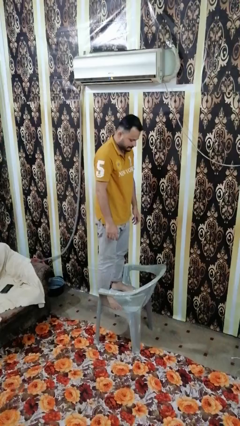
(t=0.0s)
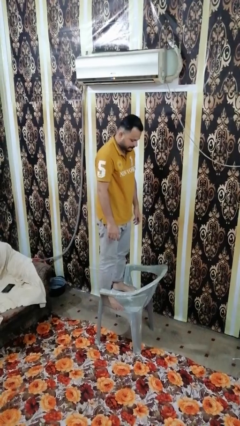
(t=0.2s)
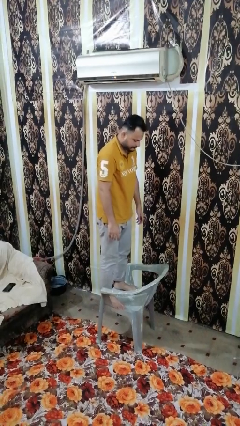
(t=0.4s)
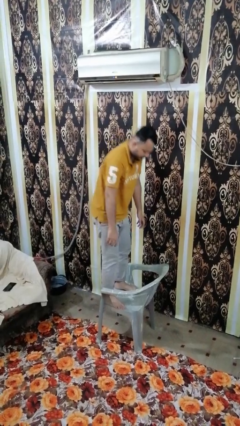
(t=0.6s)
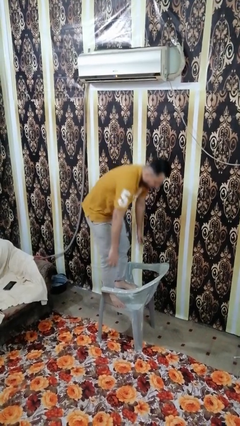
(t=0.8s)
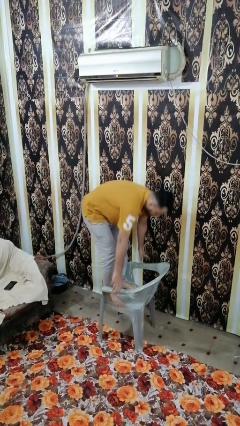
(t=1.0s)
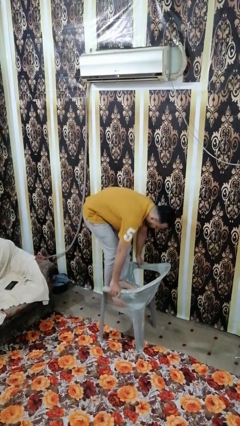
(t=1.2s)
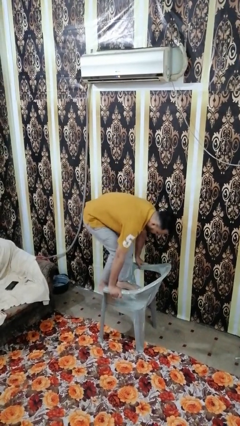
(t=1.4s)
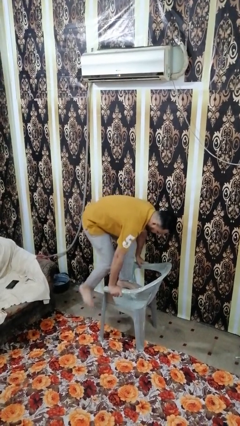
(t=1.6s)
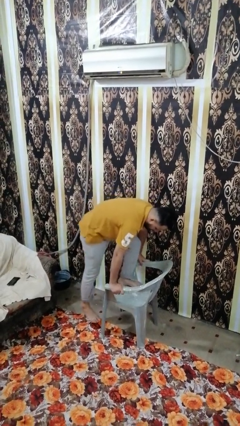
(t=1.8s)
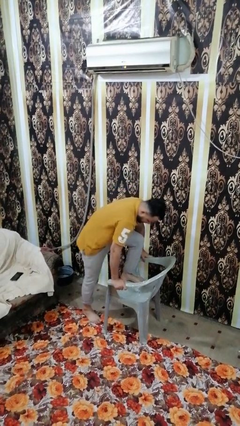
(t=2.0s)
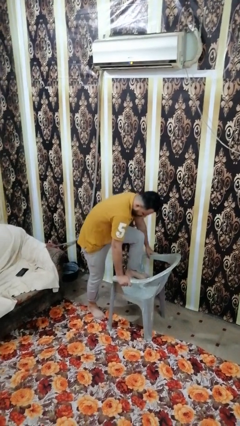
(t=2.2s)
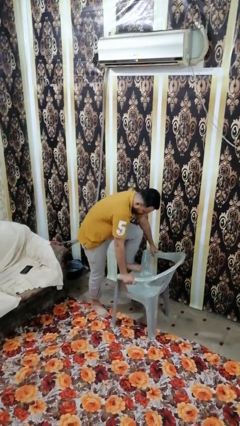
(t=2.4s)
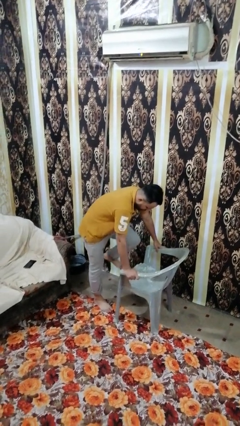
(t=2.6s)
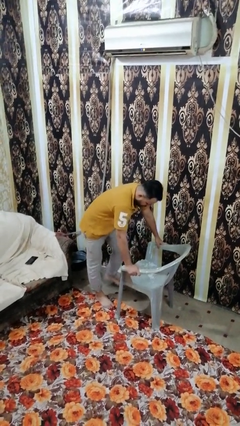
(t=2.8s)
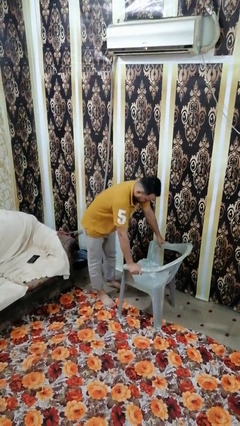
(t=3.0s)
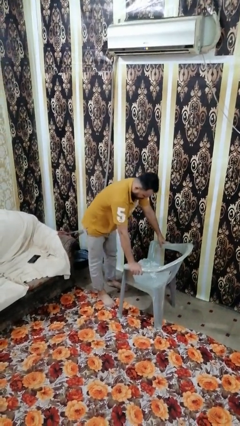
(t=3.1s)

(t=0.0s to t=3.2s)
person climbs off chair

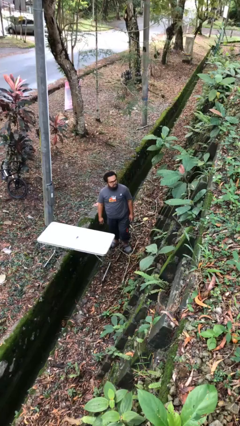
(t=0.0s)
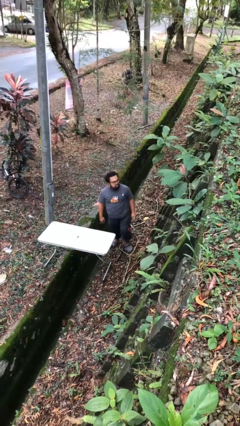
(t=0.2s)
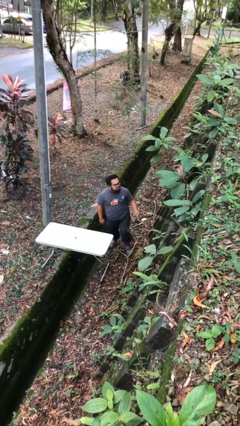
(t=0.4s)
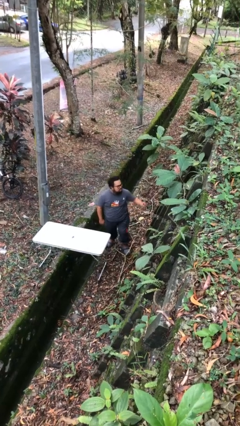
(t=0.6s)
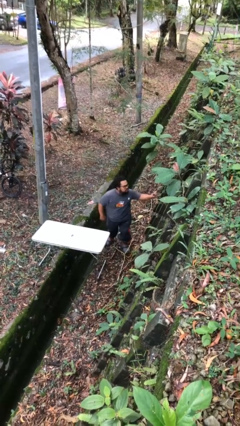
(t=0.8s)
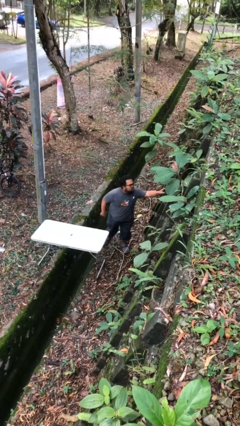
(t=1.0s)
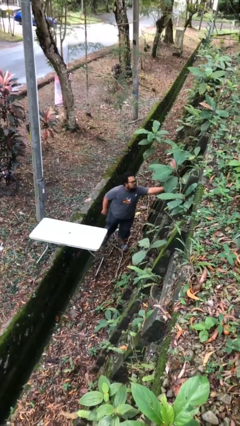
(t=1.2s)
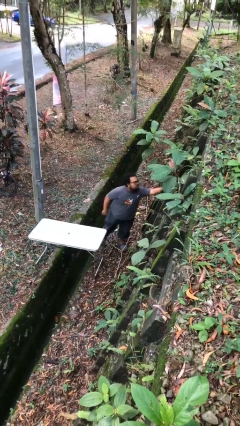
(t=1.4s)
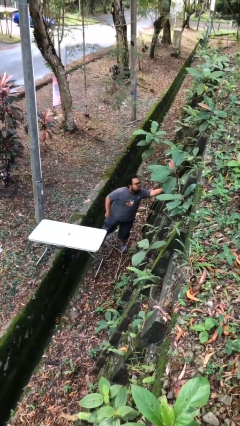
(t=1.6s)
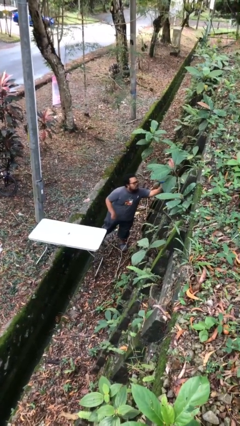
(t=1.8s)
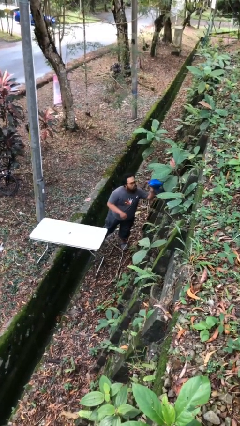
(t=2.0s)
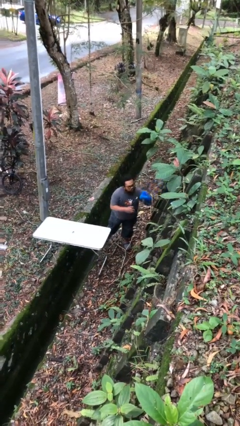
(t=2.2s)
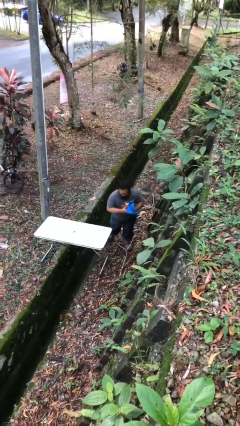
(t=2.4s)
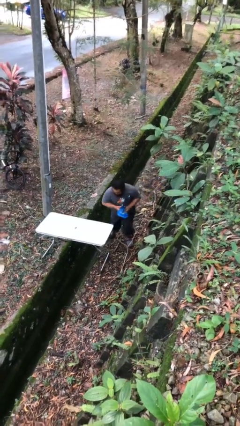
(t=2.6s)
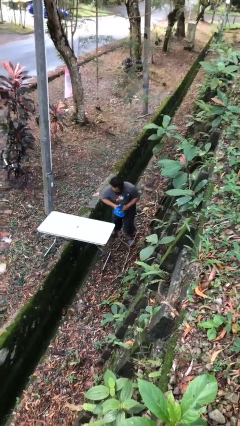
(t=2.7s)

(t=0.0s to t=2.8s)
person picks up object from shelf

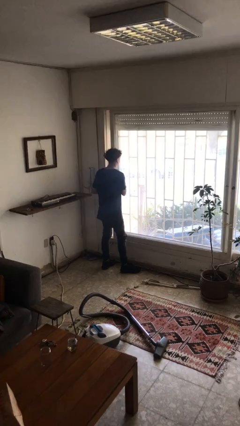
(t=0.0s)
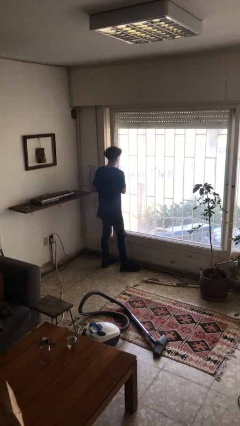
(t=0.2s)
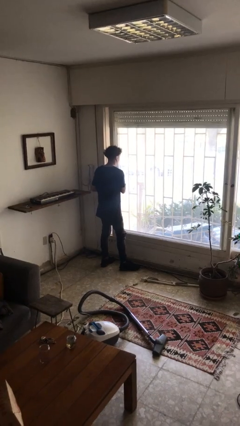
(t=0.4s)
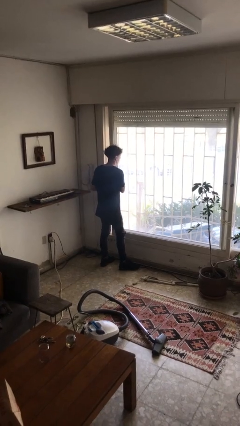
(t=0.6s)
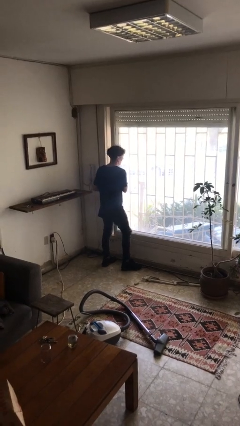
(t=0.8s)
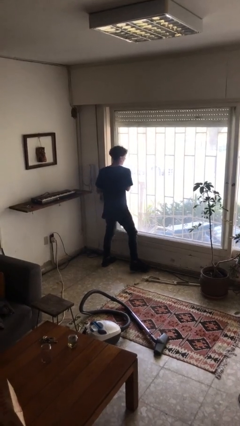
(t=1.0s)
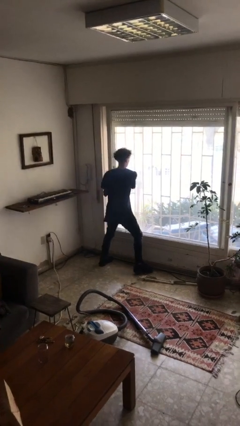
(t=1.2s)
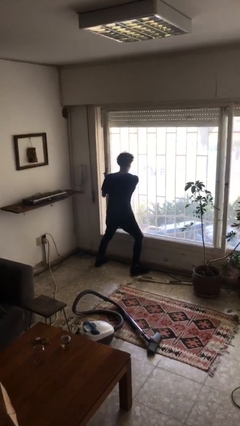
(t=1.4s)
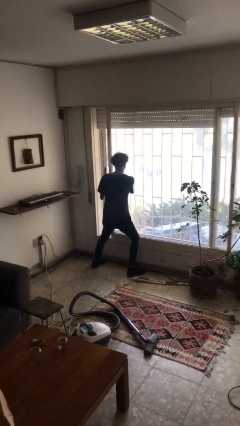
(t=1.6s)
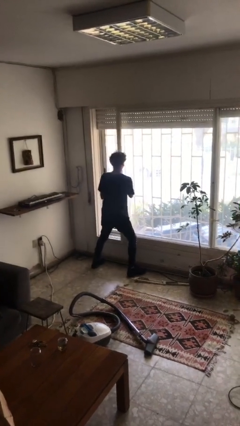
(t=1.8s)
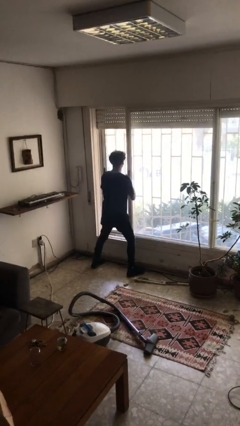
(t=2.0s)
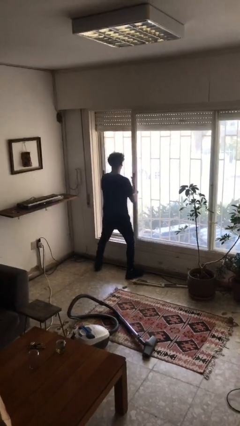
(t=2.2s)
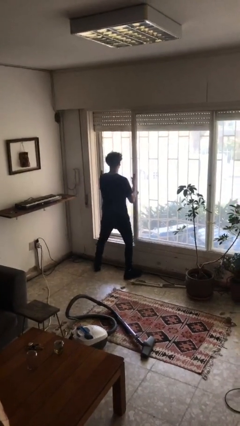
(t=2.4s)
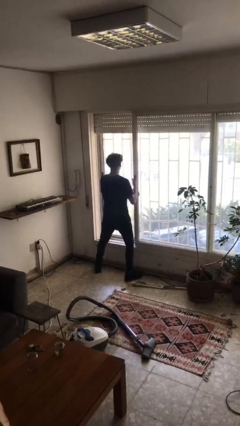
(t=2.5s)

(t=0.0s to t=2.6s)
person opens sliding door

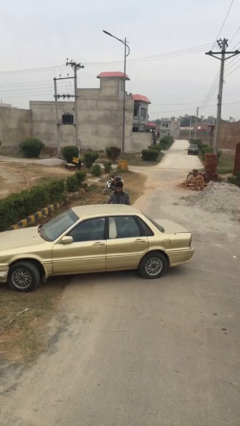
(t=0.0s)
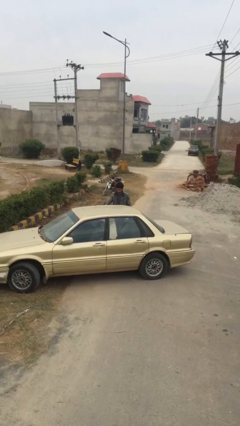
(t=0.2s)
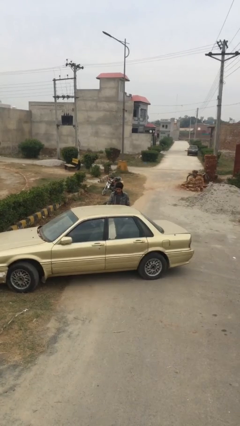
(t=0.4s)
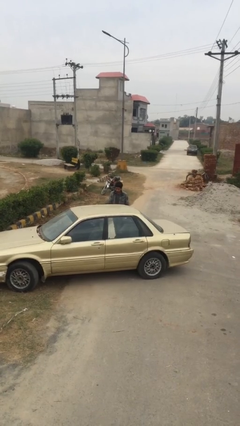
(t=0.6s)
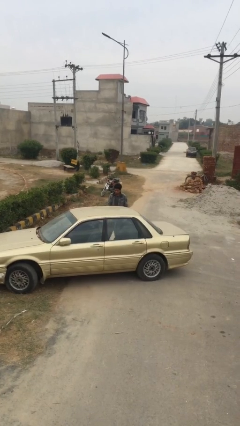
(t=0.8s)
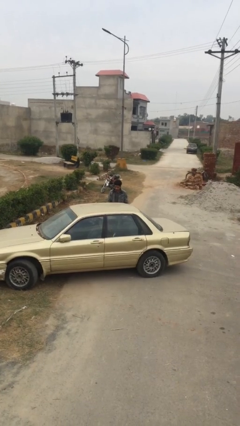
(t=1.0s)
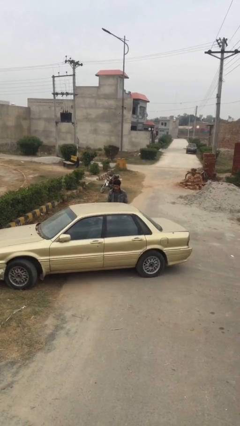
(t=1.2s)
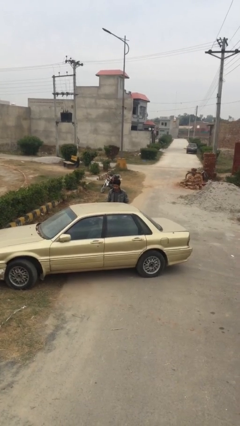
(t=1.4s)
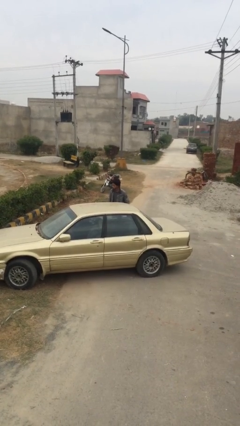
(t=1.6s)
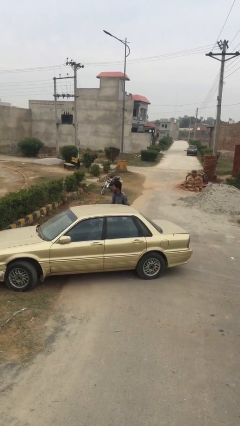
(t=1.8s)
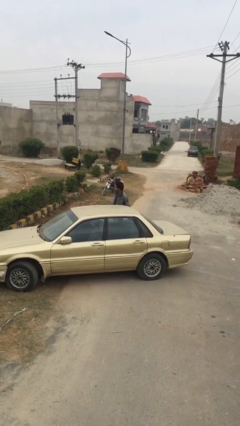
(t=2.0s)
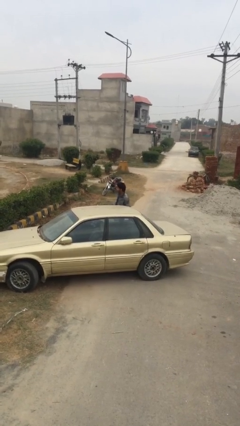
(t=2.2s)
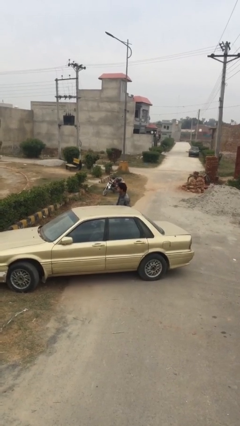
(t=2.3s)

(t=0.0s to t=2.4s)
person closes car door

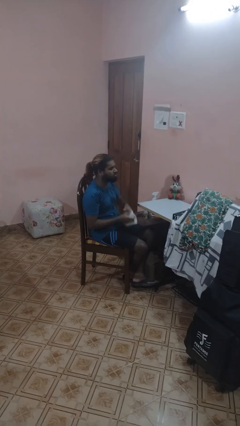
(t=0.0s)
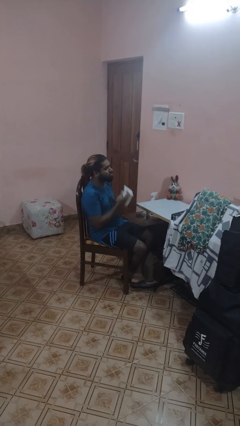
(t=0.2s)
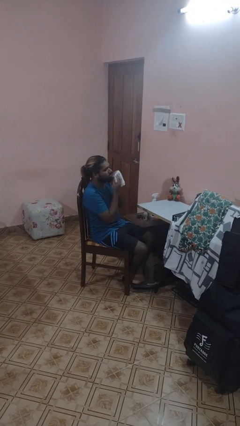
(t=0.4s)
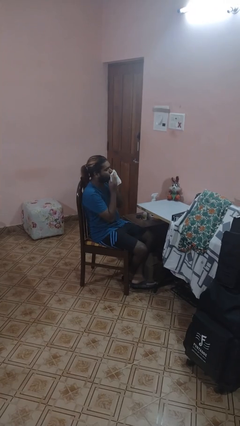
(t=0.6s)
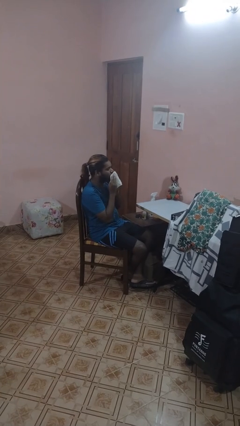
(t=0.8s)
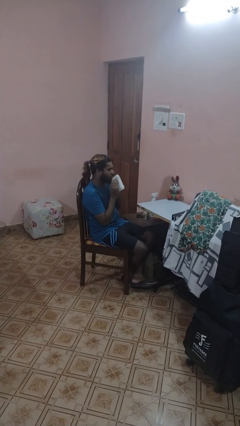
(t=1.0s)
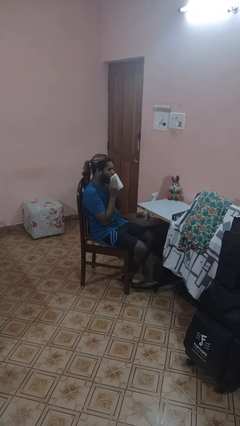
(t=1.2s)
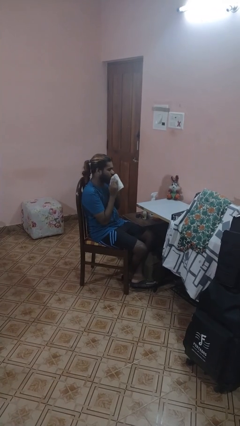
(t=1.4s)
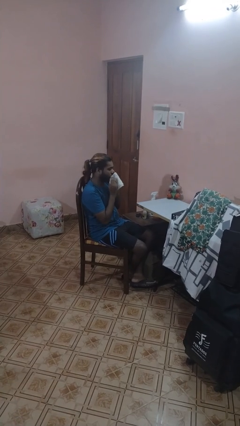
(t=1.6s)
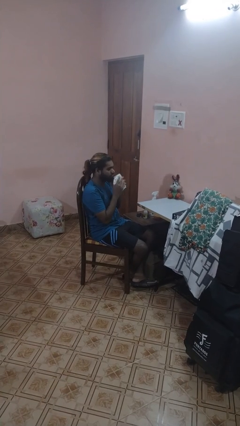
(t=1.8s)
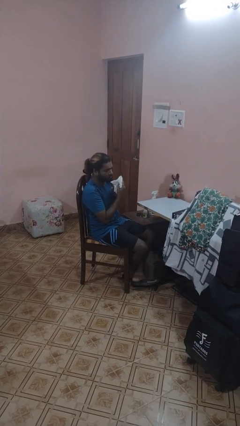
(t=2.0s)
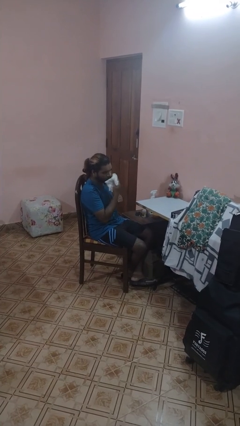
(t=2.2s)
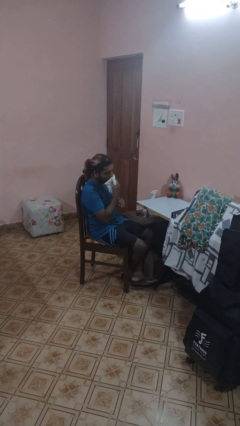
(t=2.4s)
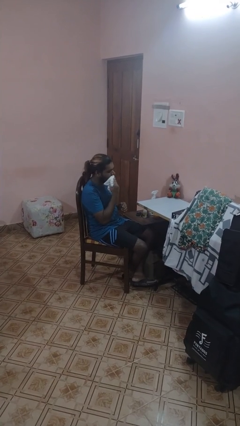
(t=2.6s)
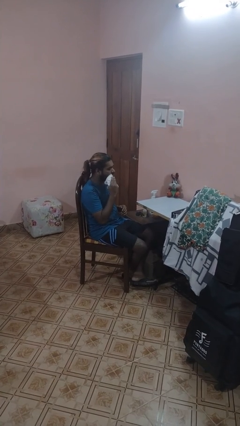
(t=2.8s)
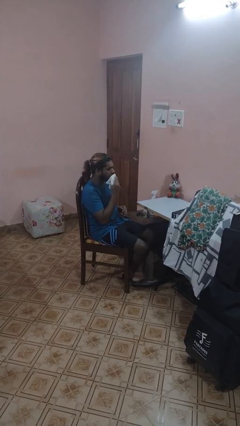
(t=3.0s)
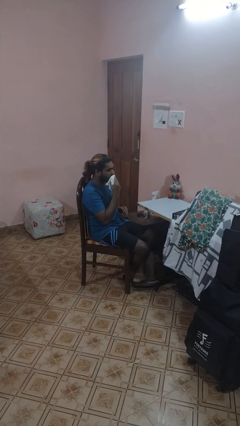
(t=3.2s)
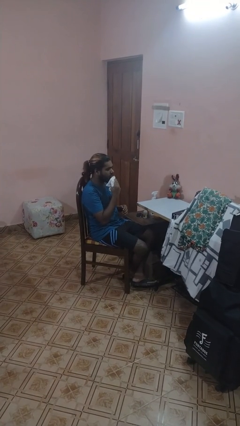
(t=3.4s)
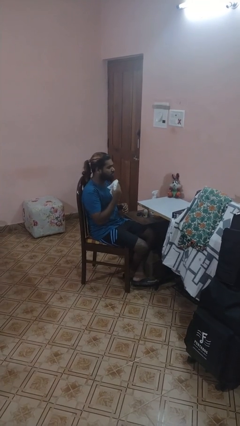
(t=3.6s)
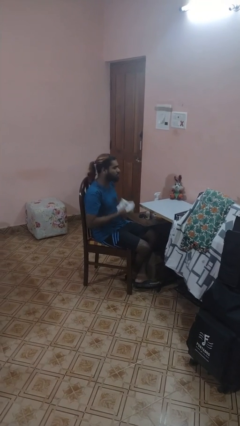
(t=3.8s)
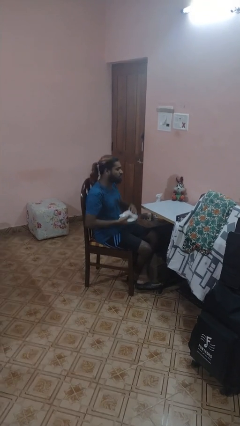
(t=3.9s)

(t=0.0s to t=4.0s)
person wipes mouth with napkin

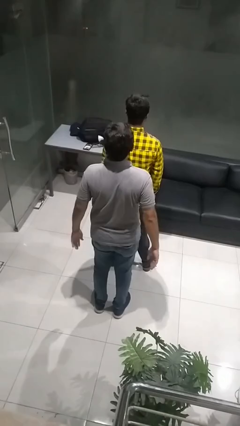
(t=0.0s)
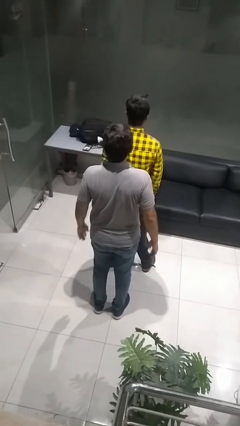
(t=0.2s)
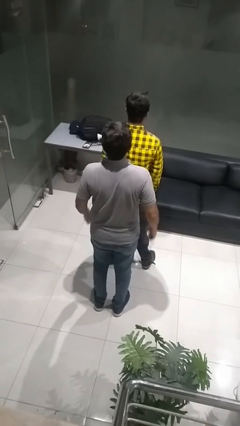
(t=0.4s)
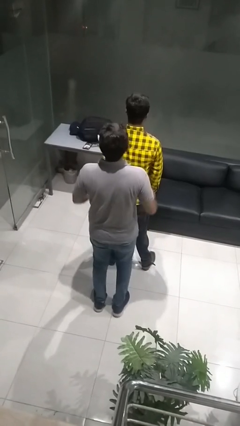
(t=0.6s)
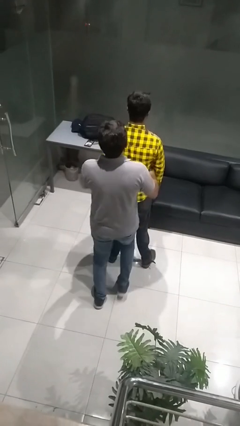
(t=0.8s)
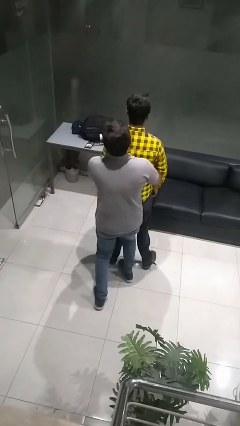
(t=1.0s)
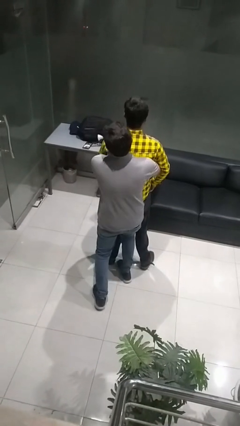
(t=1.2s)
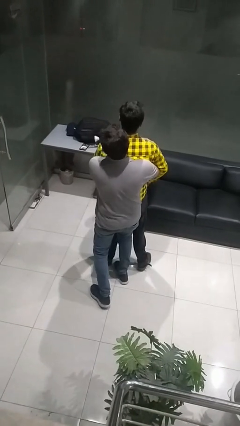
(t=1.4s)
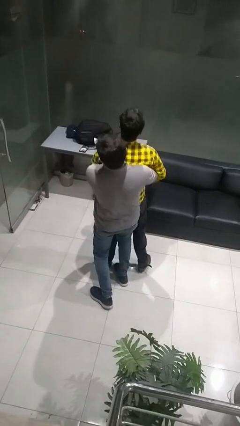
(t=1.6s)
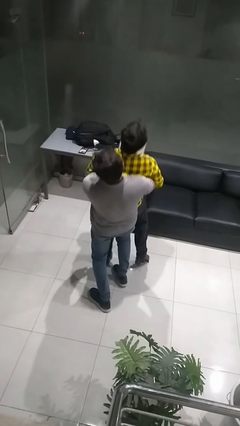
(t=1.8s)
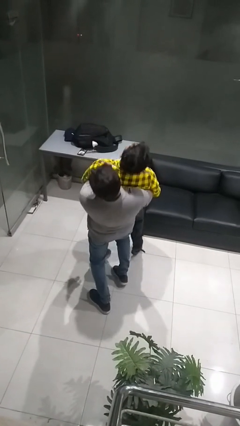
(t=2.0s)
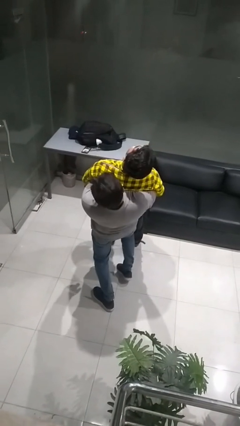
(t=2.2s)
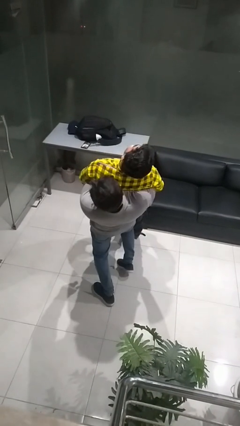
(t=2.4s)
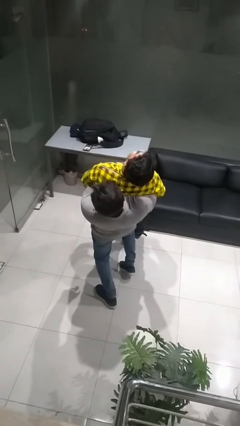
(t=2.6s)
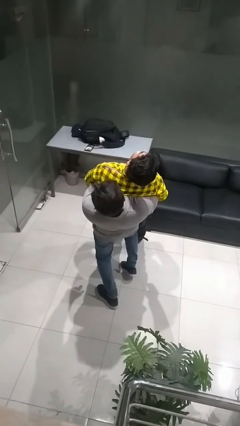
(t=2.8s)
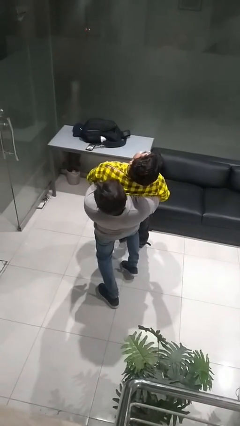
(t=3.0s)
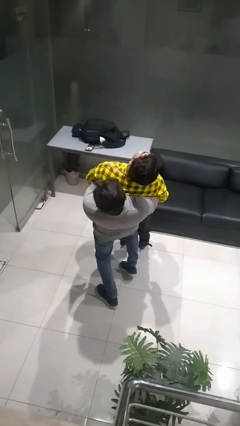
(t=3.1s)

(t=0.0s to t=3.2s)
person picks up person
